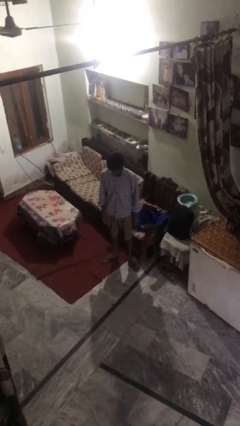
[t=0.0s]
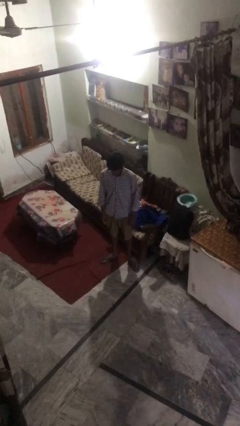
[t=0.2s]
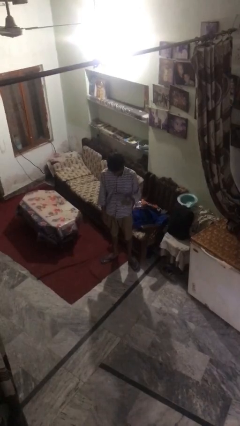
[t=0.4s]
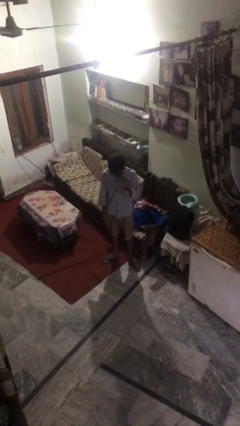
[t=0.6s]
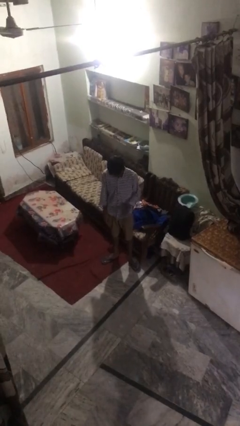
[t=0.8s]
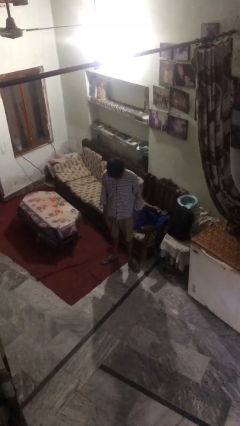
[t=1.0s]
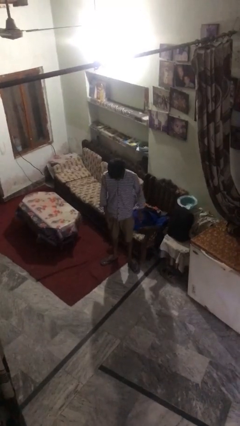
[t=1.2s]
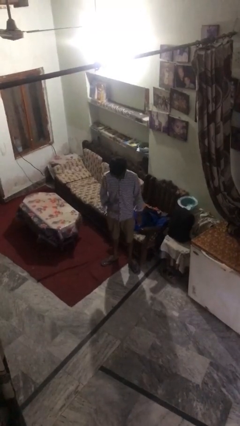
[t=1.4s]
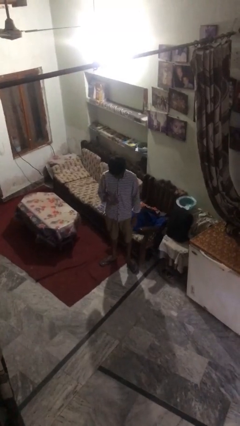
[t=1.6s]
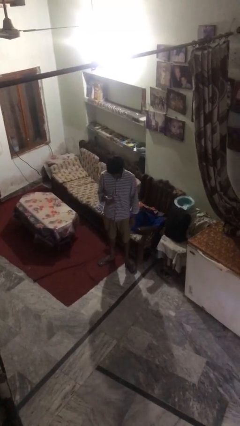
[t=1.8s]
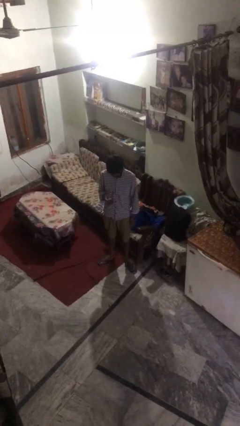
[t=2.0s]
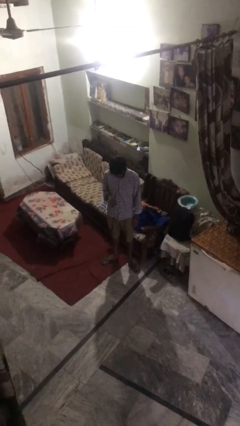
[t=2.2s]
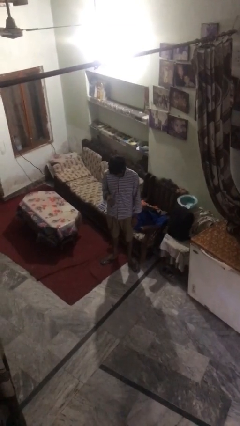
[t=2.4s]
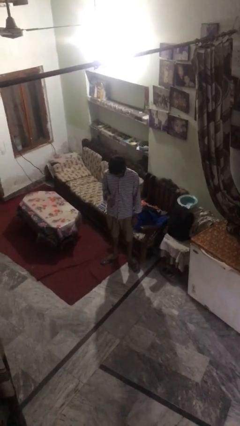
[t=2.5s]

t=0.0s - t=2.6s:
person bounces ball on floor

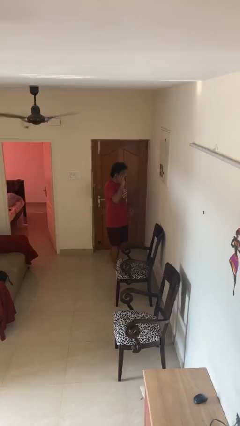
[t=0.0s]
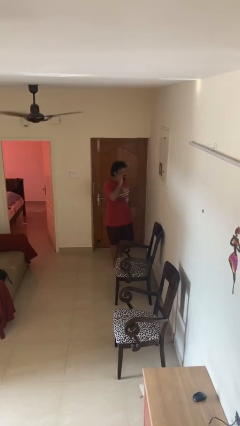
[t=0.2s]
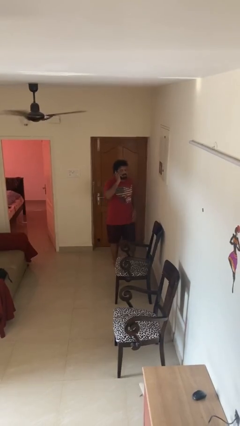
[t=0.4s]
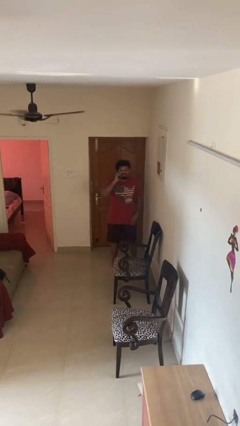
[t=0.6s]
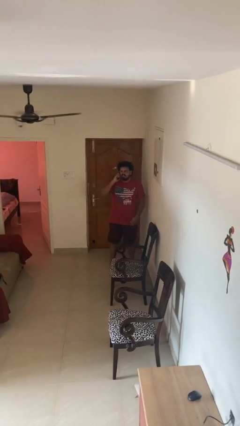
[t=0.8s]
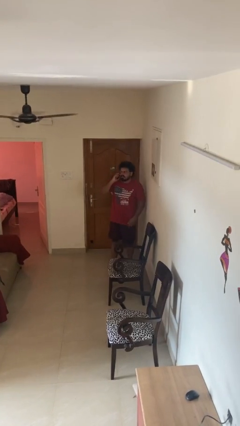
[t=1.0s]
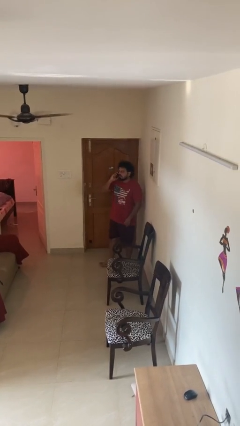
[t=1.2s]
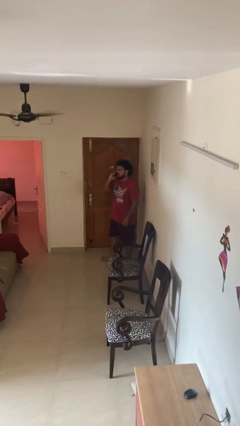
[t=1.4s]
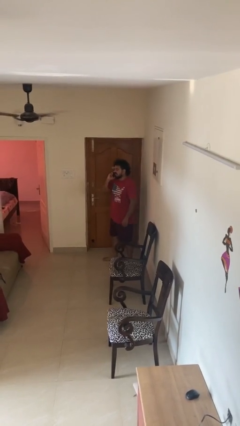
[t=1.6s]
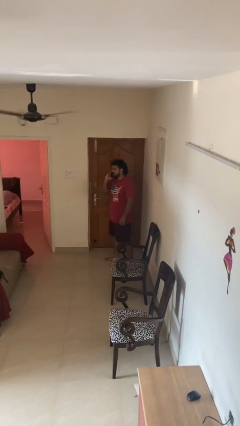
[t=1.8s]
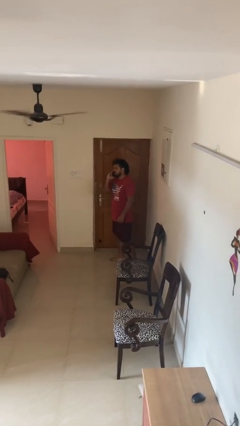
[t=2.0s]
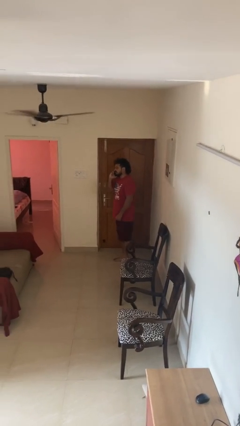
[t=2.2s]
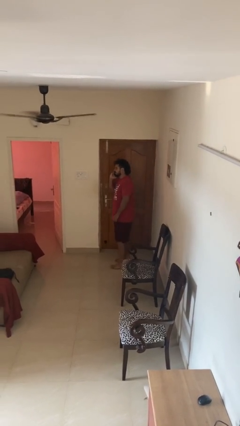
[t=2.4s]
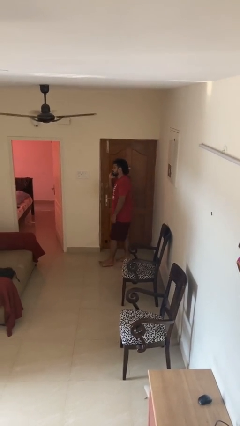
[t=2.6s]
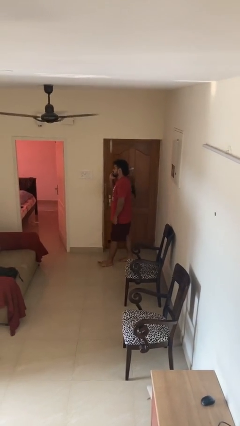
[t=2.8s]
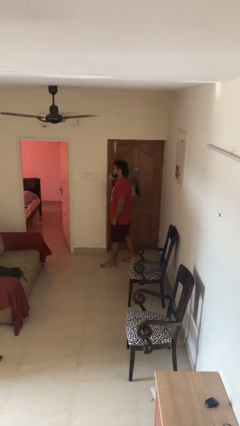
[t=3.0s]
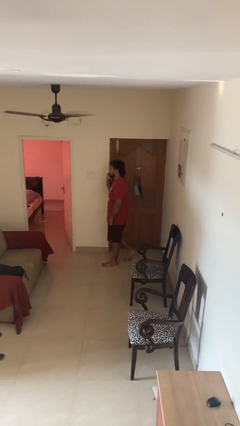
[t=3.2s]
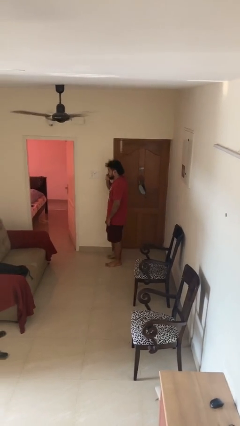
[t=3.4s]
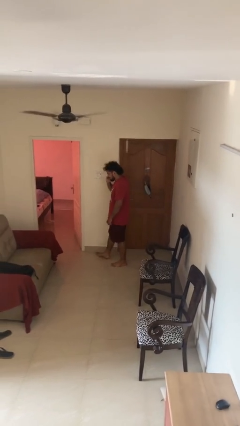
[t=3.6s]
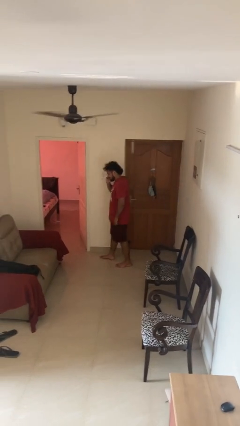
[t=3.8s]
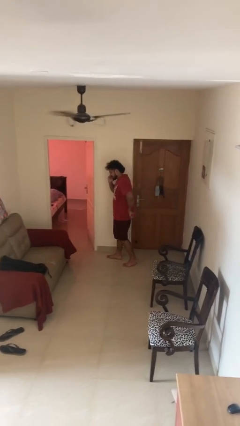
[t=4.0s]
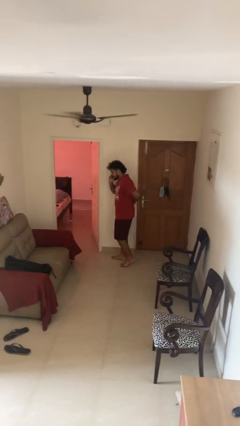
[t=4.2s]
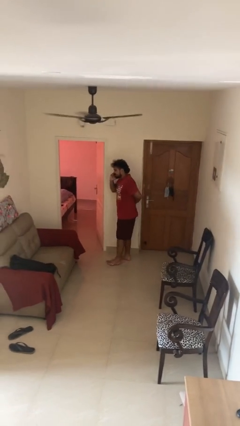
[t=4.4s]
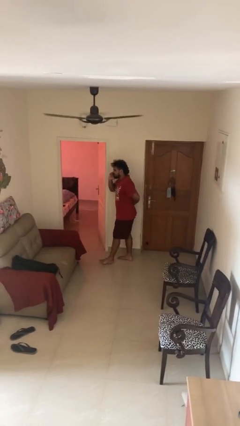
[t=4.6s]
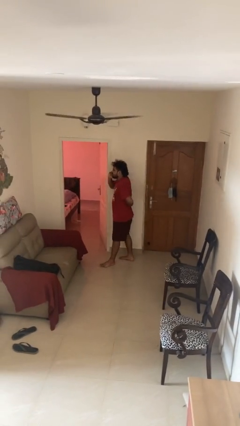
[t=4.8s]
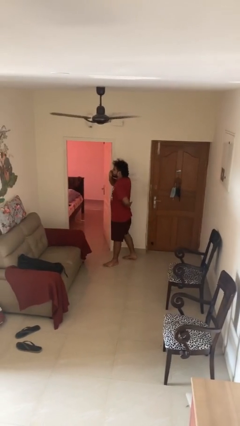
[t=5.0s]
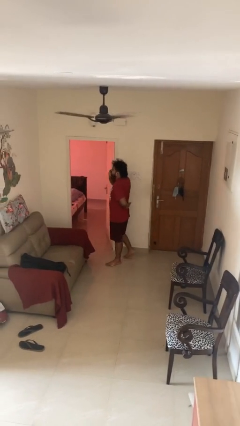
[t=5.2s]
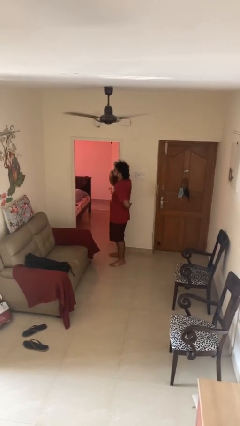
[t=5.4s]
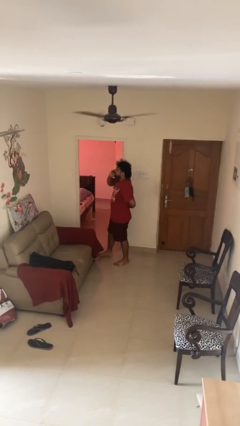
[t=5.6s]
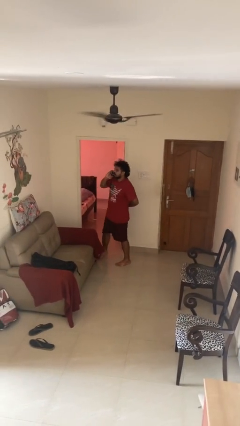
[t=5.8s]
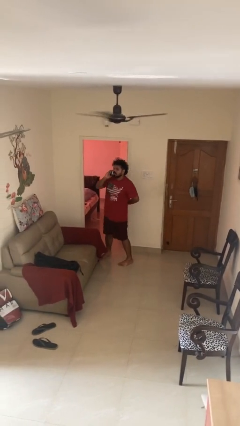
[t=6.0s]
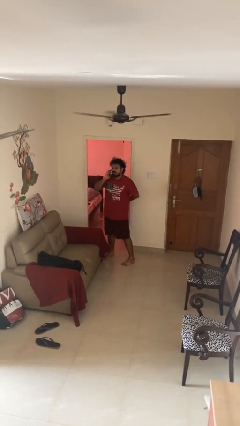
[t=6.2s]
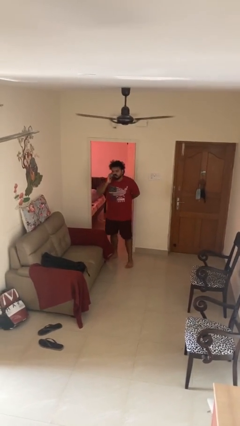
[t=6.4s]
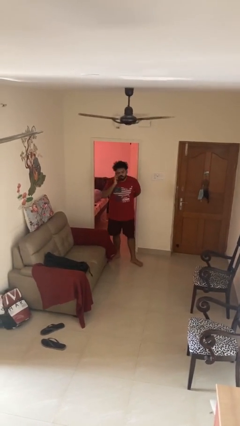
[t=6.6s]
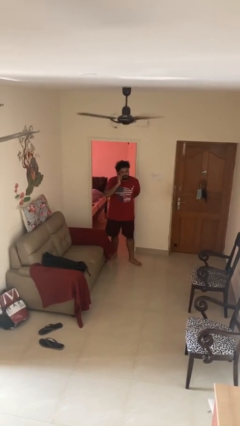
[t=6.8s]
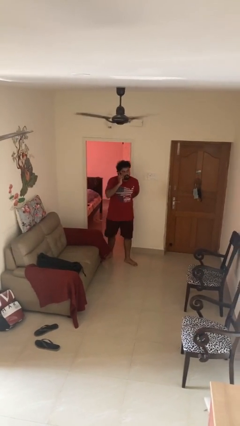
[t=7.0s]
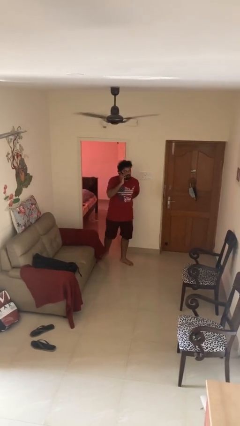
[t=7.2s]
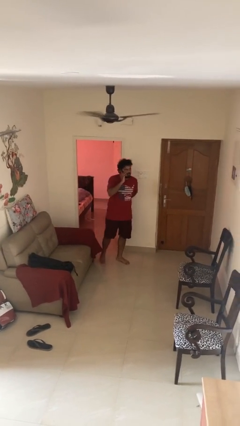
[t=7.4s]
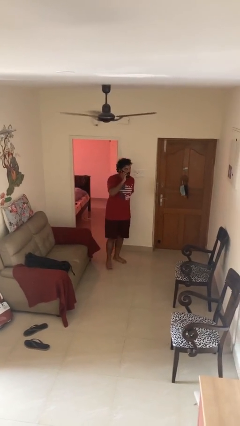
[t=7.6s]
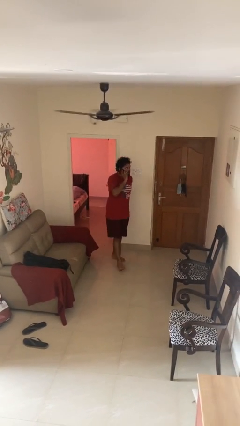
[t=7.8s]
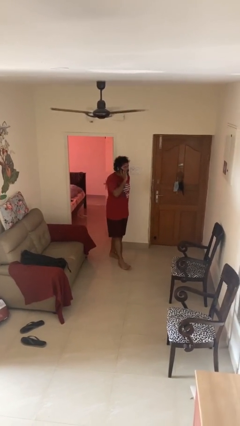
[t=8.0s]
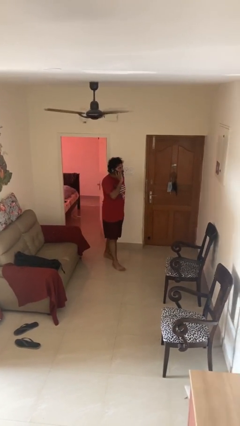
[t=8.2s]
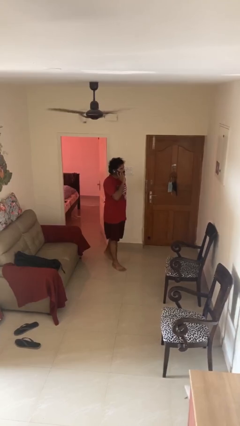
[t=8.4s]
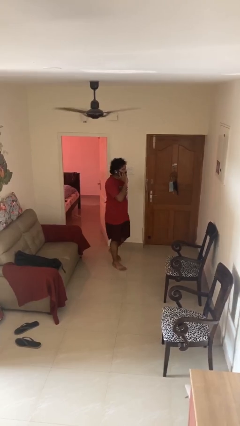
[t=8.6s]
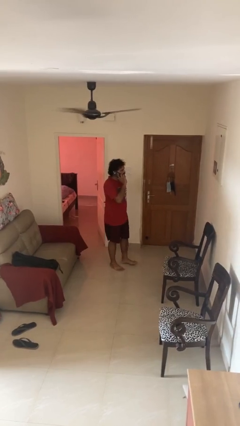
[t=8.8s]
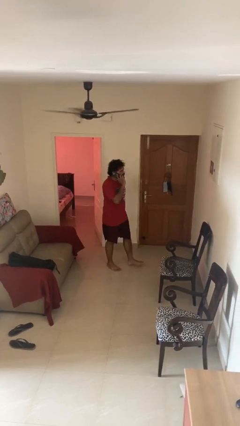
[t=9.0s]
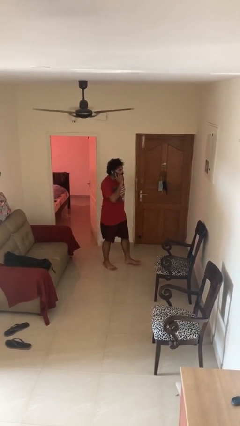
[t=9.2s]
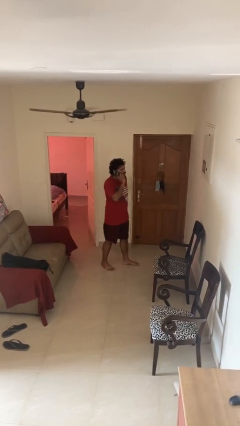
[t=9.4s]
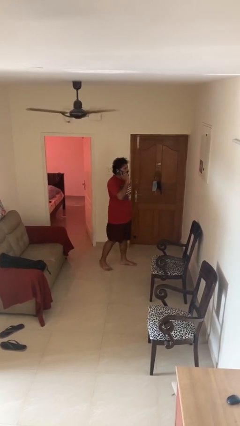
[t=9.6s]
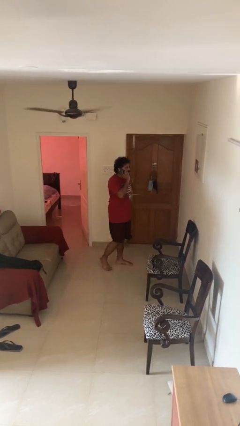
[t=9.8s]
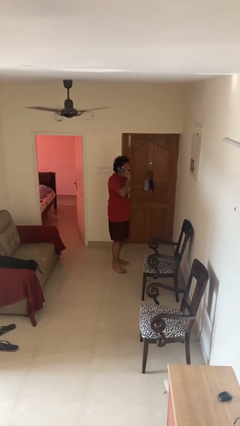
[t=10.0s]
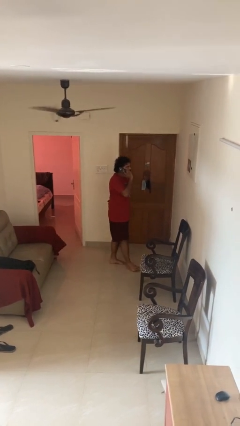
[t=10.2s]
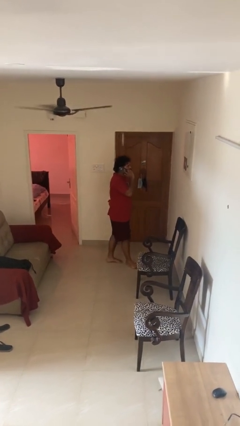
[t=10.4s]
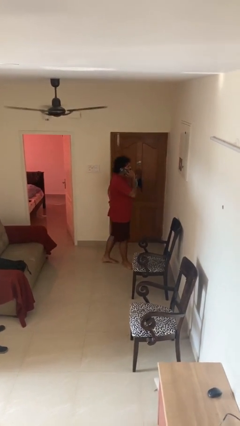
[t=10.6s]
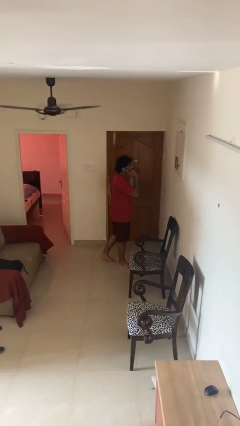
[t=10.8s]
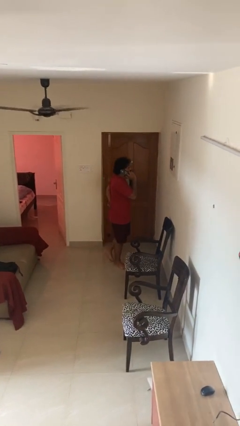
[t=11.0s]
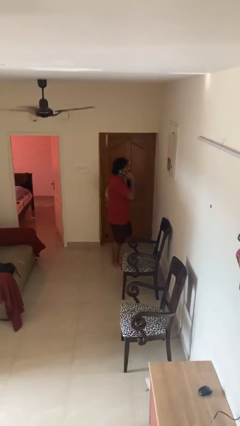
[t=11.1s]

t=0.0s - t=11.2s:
person talks on phone

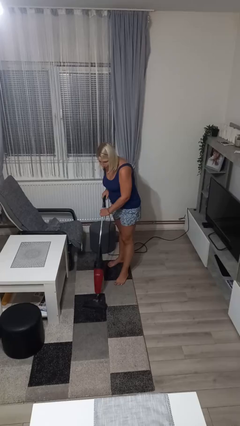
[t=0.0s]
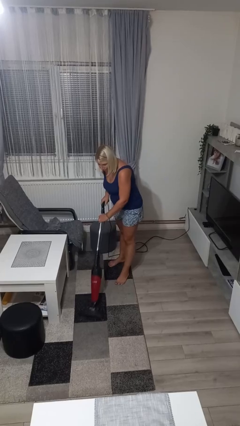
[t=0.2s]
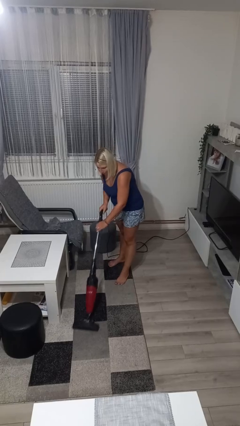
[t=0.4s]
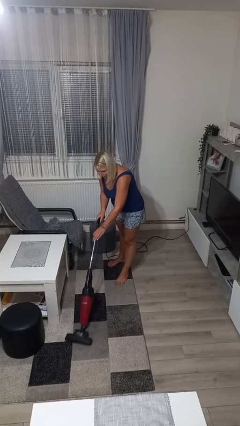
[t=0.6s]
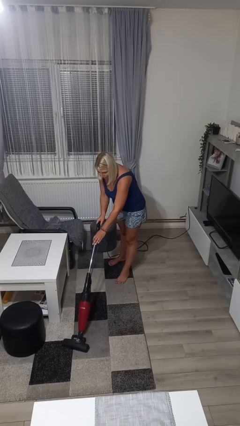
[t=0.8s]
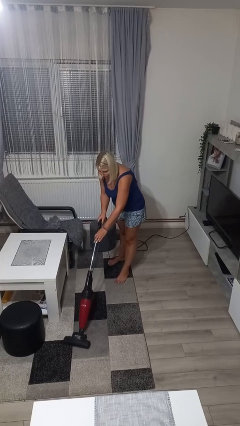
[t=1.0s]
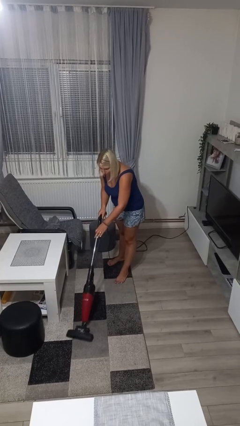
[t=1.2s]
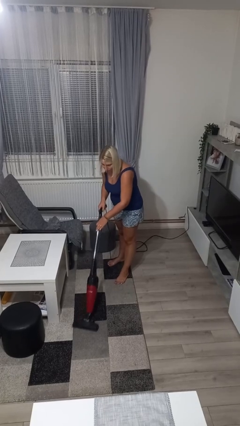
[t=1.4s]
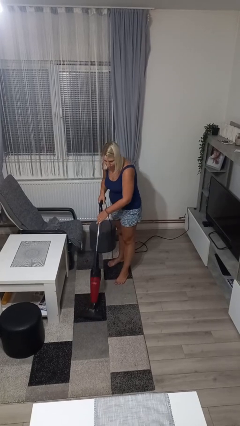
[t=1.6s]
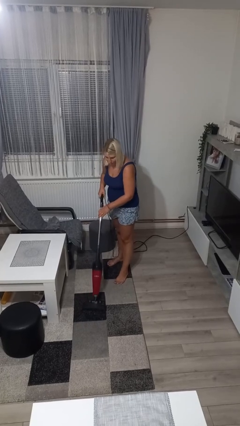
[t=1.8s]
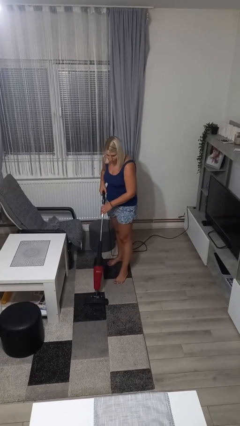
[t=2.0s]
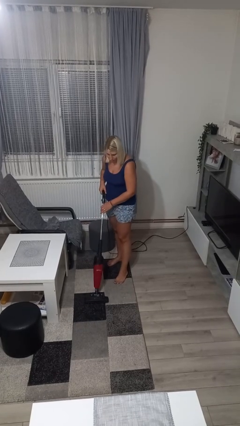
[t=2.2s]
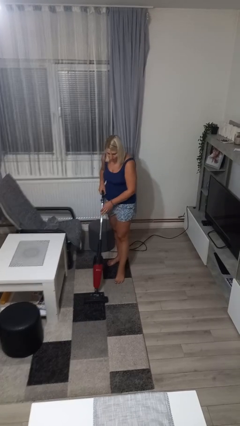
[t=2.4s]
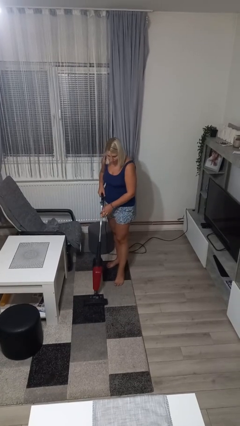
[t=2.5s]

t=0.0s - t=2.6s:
person vacuums carpet

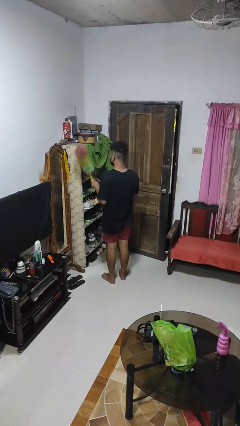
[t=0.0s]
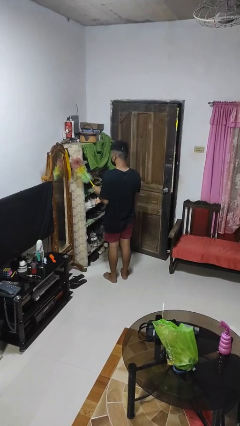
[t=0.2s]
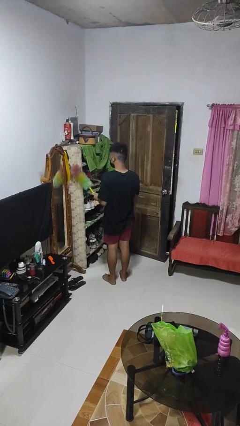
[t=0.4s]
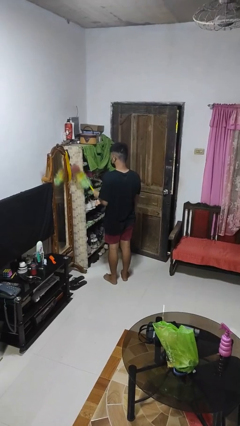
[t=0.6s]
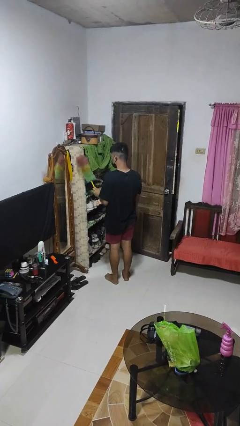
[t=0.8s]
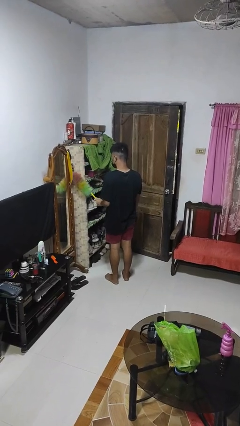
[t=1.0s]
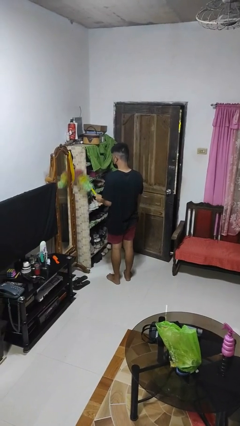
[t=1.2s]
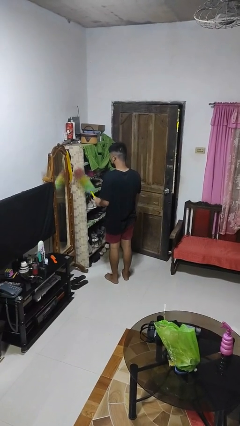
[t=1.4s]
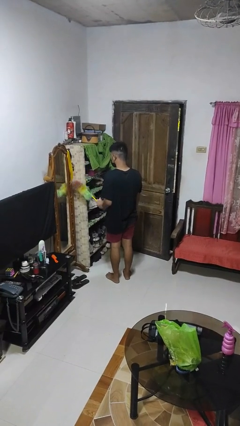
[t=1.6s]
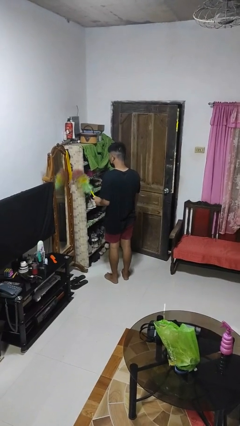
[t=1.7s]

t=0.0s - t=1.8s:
person dusts furniture
